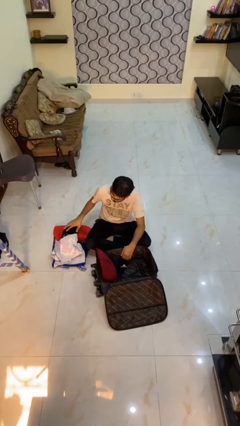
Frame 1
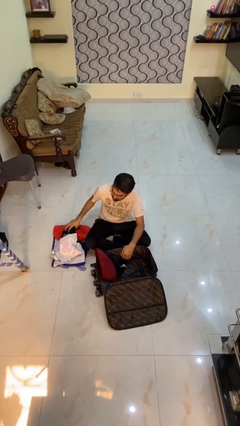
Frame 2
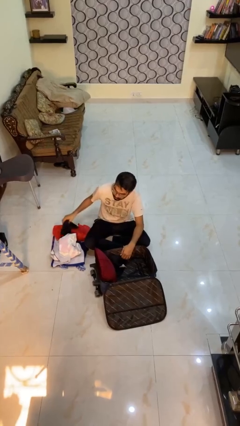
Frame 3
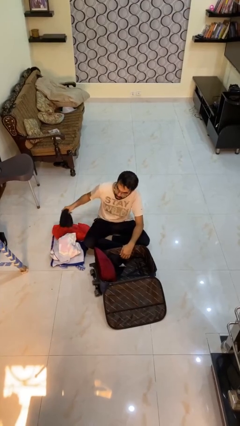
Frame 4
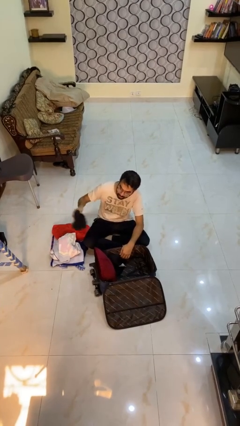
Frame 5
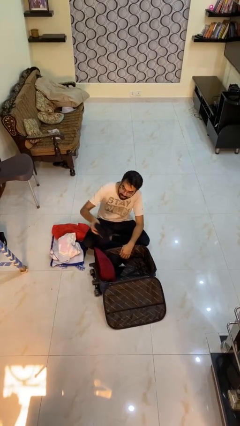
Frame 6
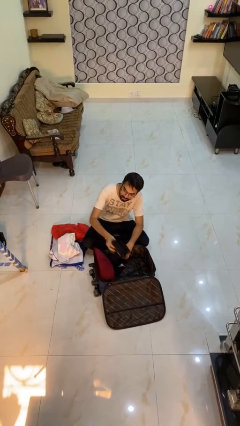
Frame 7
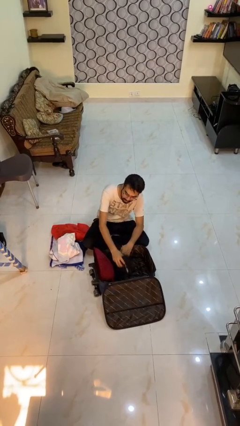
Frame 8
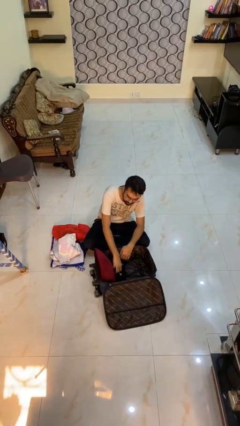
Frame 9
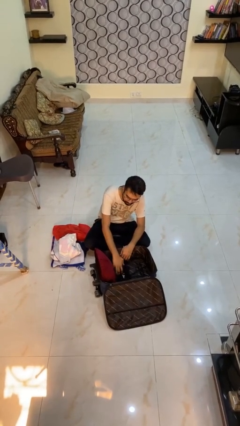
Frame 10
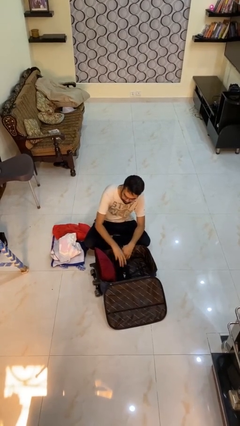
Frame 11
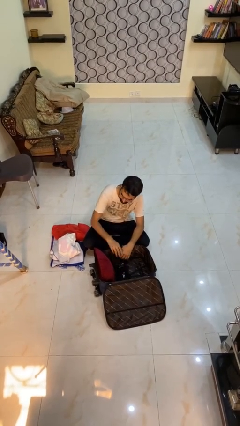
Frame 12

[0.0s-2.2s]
person loads clothes into suitcase

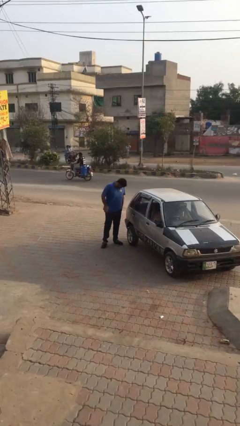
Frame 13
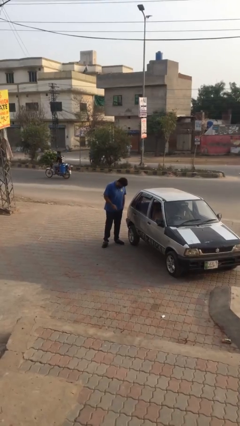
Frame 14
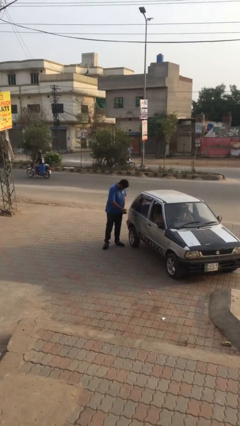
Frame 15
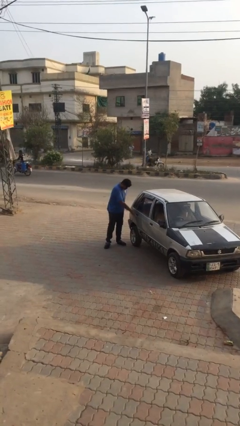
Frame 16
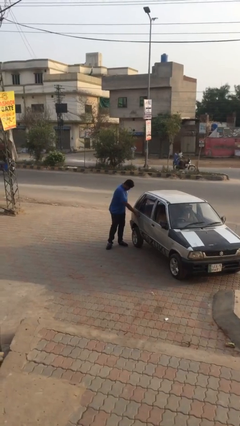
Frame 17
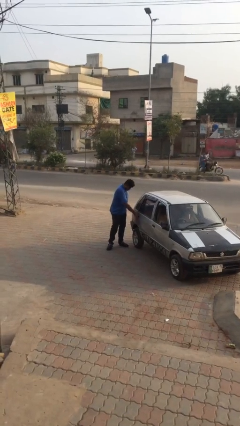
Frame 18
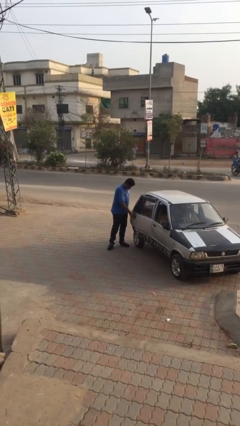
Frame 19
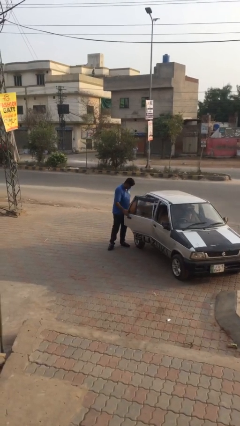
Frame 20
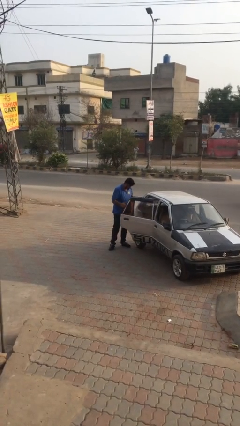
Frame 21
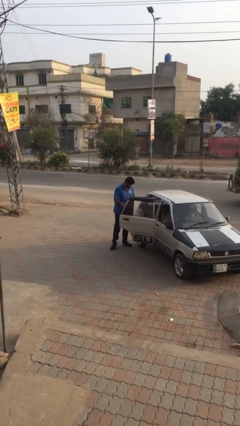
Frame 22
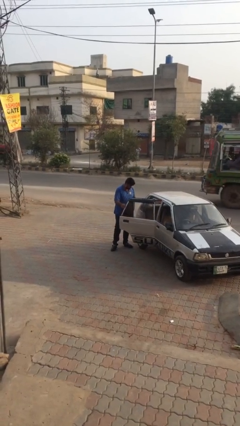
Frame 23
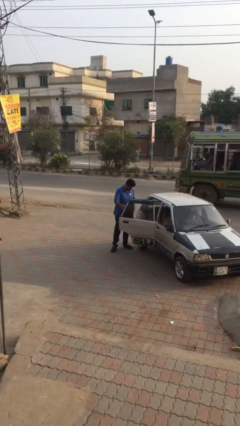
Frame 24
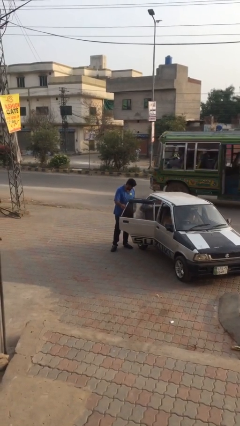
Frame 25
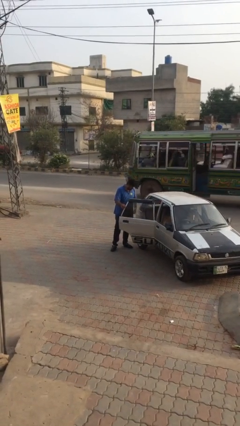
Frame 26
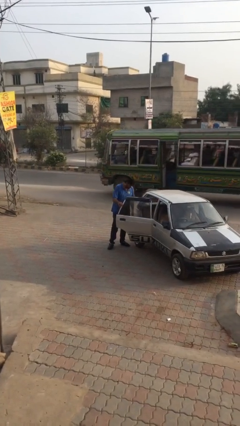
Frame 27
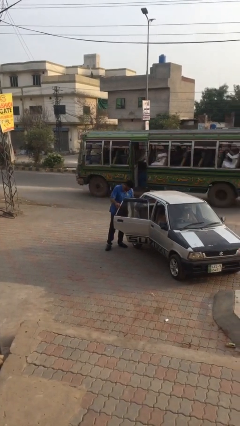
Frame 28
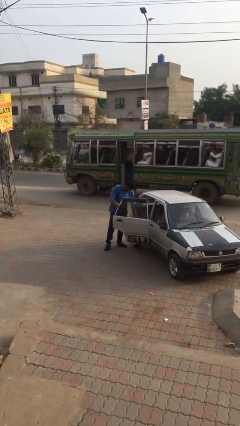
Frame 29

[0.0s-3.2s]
person opens car door

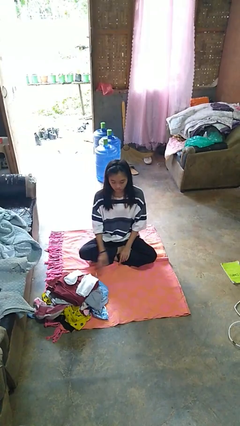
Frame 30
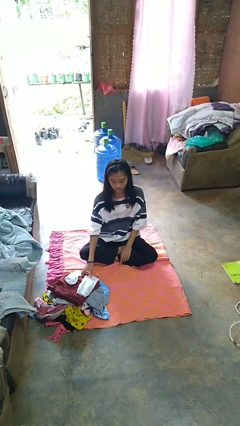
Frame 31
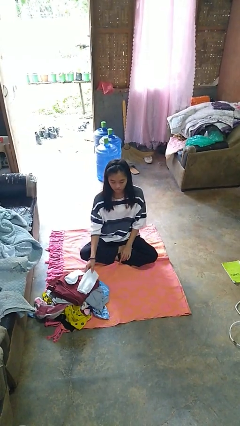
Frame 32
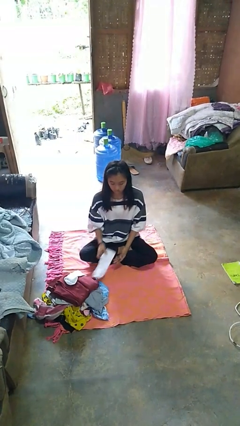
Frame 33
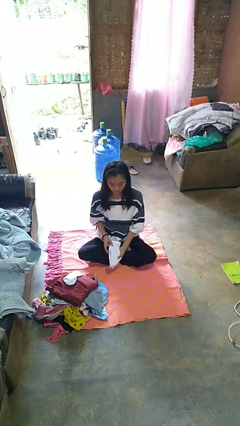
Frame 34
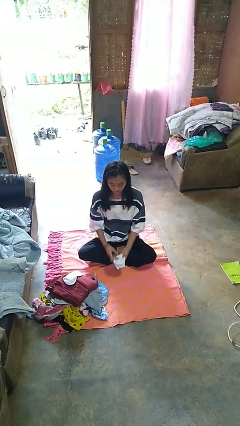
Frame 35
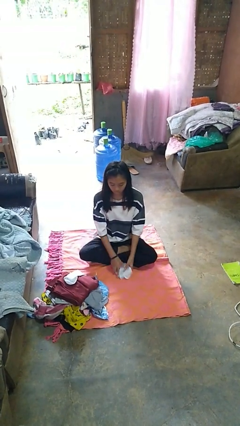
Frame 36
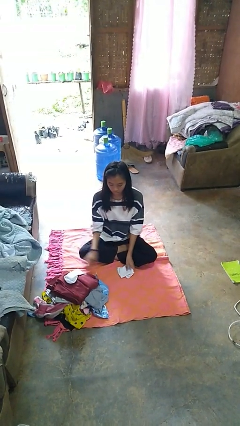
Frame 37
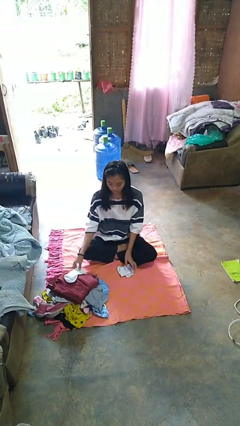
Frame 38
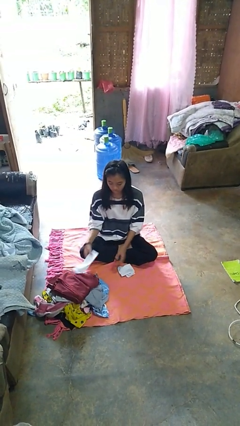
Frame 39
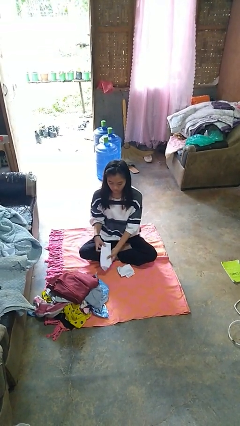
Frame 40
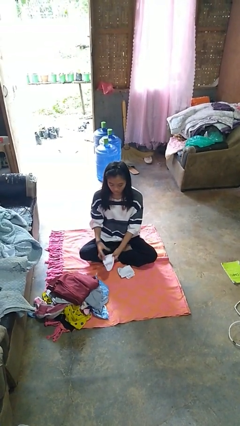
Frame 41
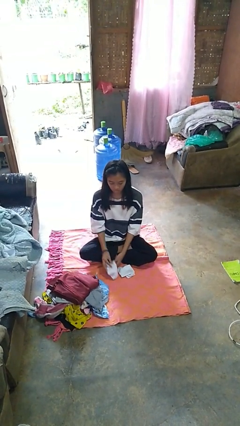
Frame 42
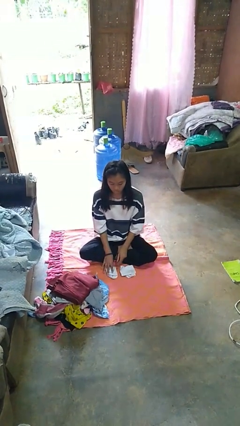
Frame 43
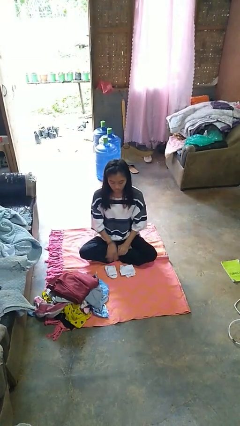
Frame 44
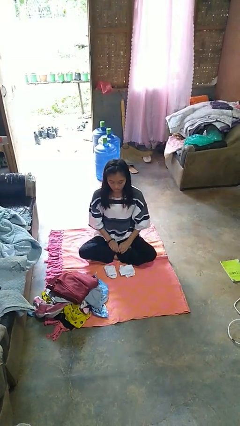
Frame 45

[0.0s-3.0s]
person folds socks

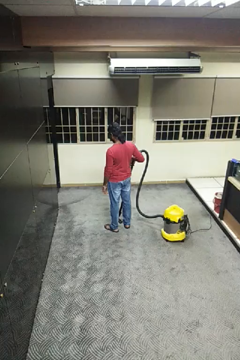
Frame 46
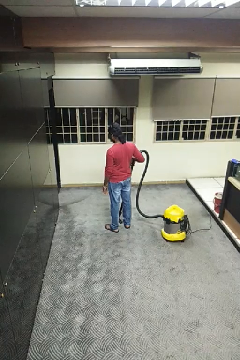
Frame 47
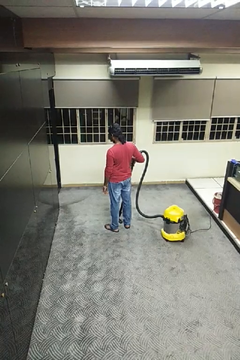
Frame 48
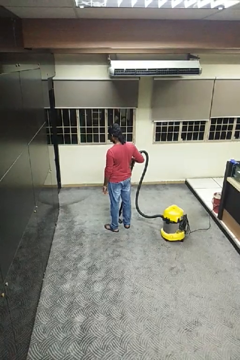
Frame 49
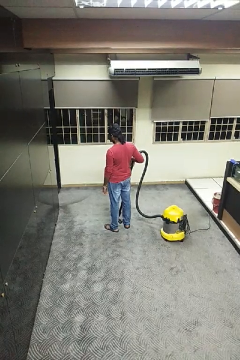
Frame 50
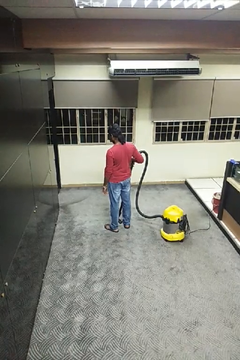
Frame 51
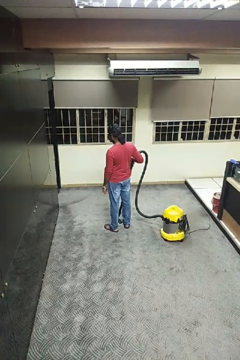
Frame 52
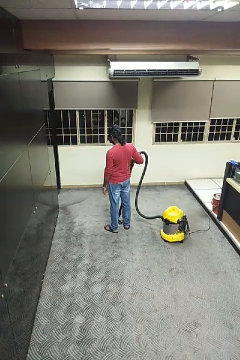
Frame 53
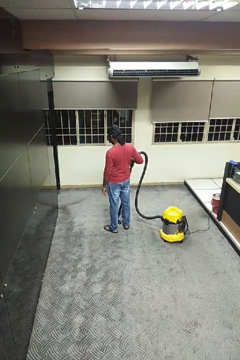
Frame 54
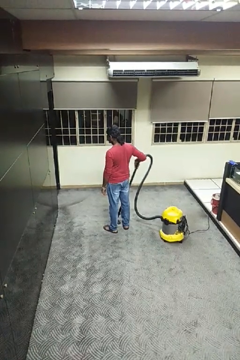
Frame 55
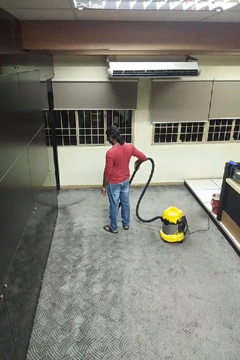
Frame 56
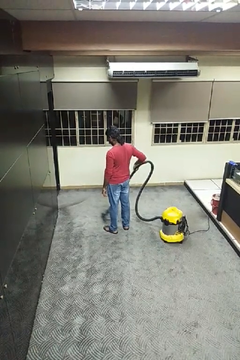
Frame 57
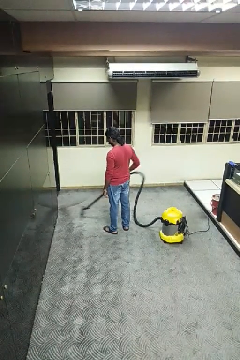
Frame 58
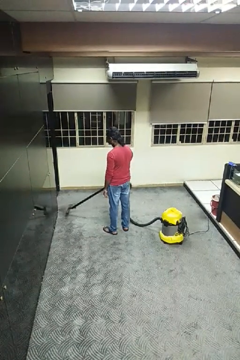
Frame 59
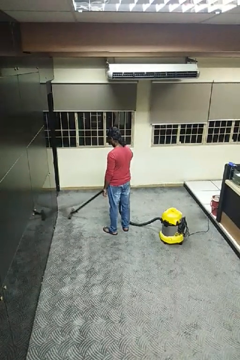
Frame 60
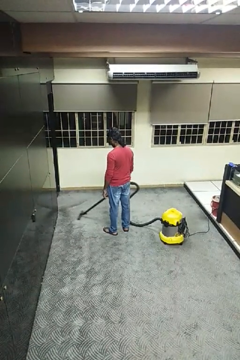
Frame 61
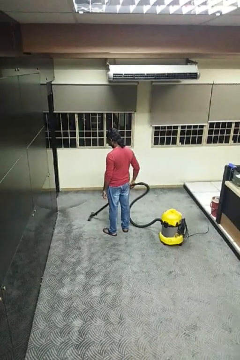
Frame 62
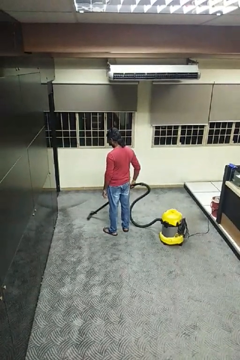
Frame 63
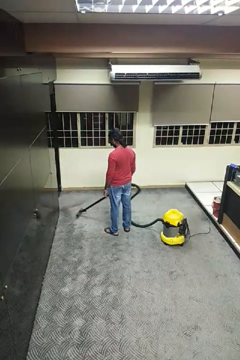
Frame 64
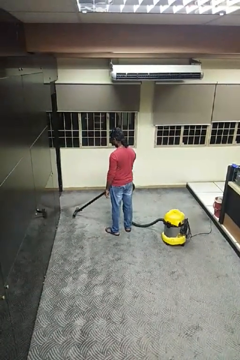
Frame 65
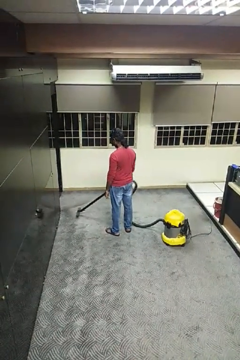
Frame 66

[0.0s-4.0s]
person vacuums carpet

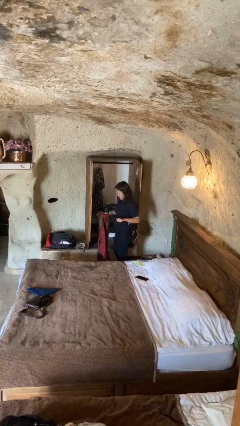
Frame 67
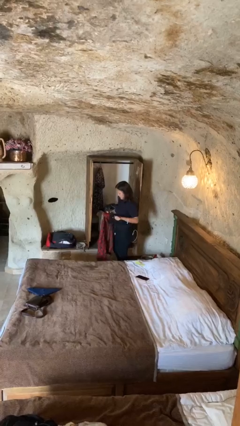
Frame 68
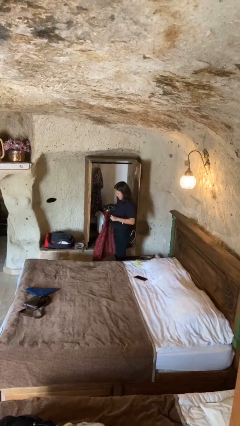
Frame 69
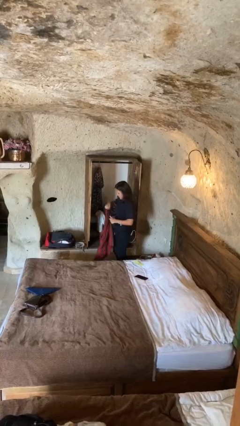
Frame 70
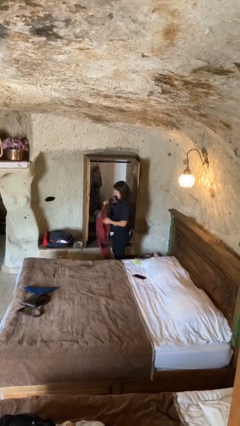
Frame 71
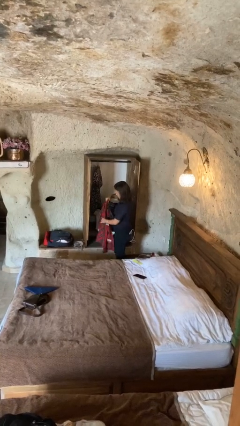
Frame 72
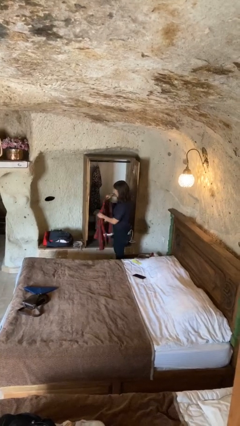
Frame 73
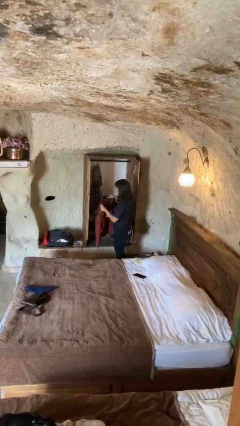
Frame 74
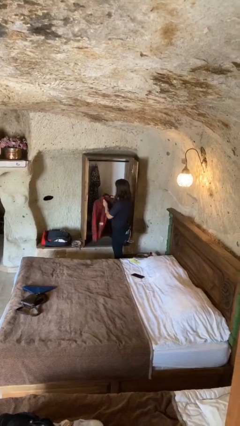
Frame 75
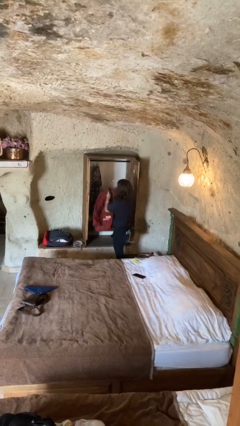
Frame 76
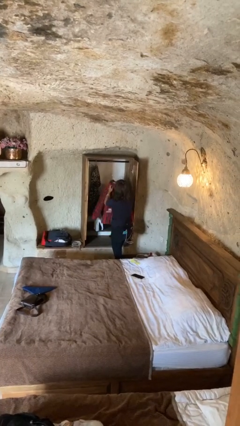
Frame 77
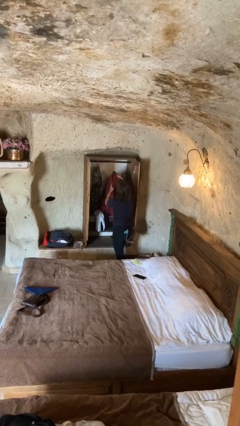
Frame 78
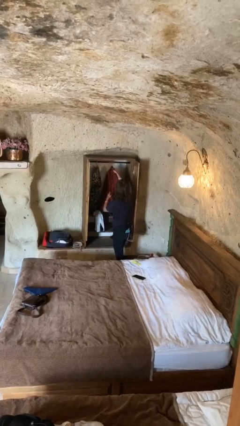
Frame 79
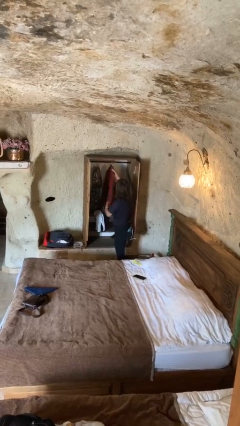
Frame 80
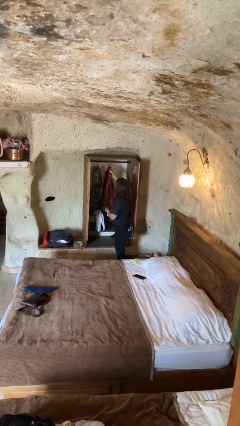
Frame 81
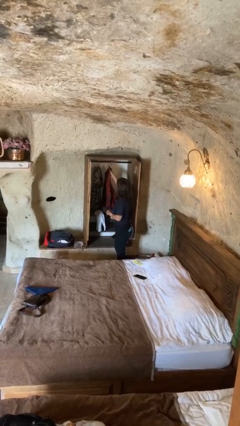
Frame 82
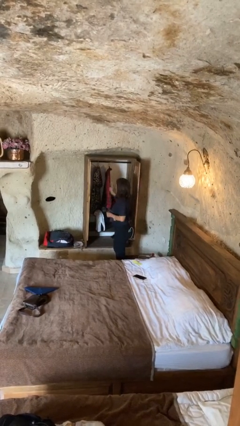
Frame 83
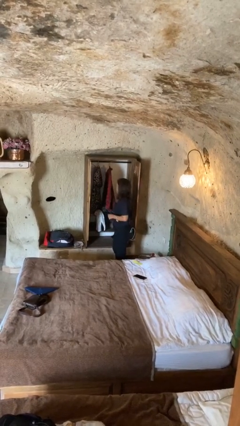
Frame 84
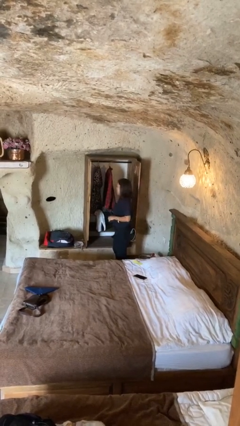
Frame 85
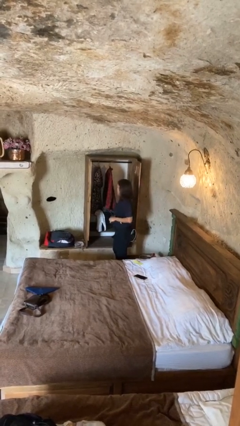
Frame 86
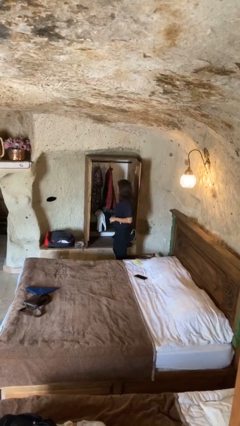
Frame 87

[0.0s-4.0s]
person puts clothes into closet

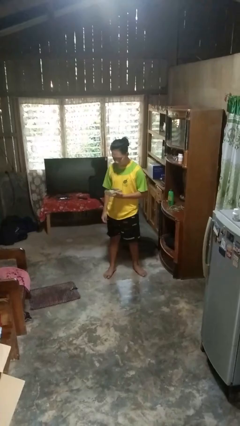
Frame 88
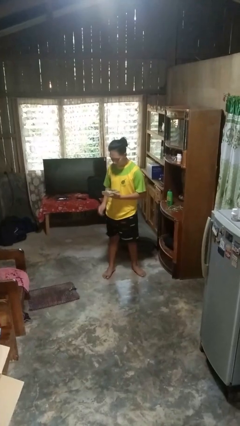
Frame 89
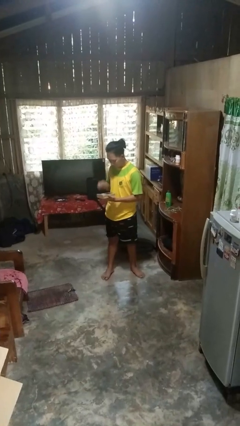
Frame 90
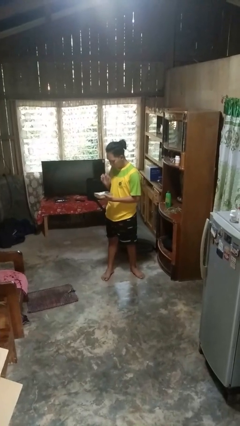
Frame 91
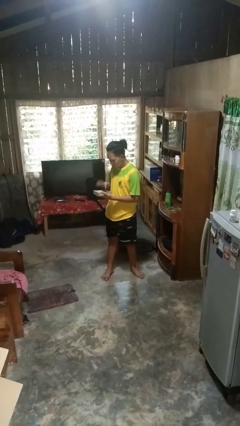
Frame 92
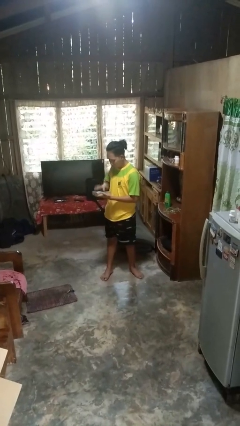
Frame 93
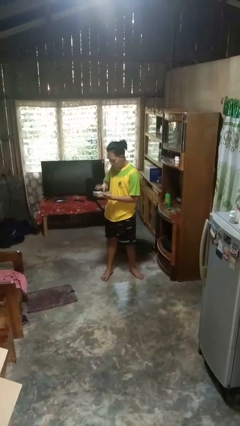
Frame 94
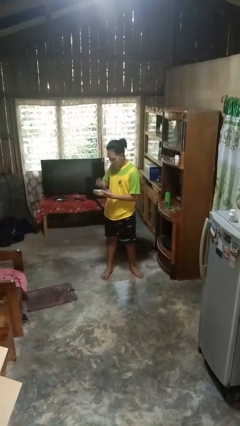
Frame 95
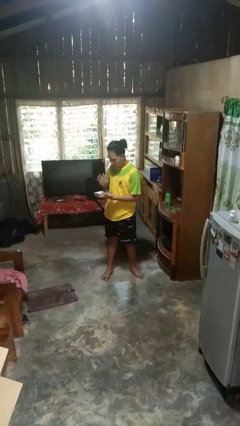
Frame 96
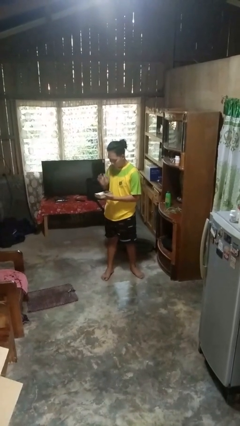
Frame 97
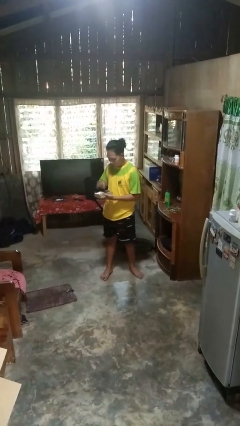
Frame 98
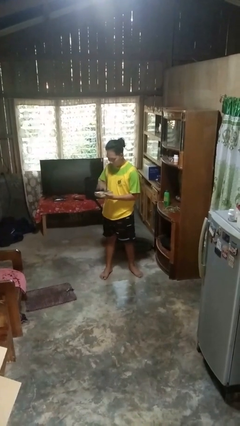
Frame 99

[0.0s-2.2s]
person taps object with finger
